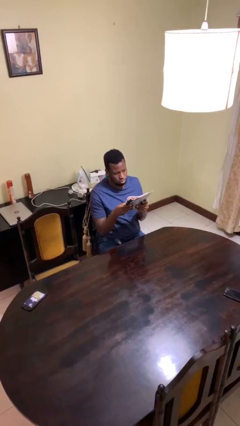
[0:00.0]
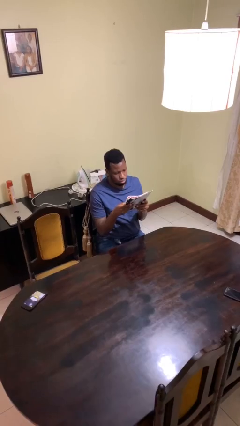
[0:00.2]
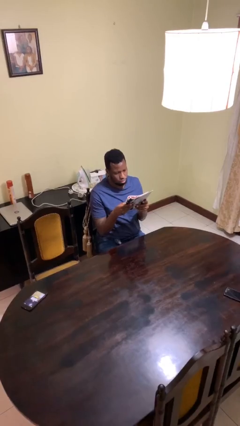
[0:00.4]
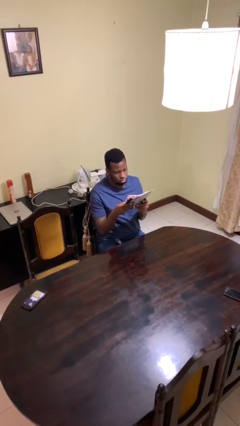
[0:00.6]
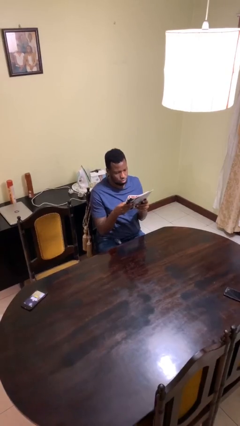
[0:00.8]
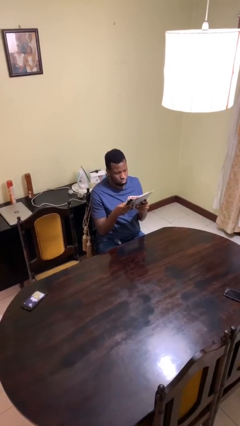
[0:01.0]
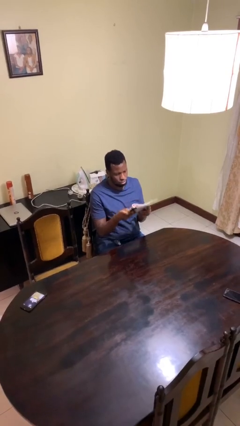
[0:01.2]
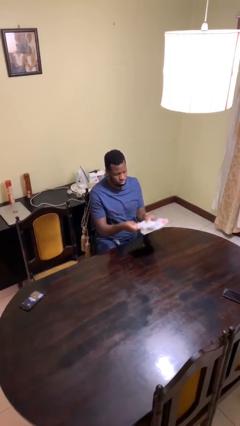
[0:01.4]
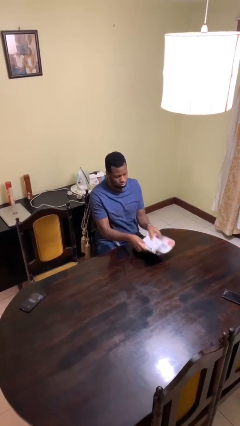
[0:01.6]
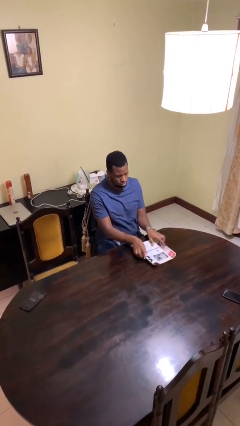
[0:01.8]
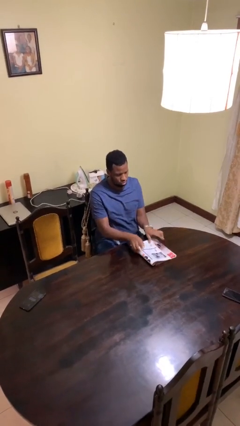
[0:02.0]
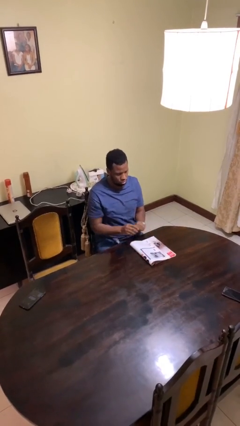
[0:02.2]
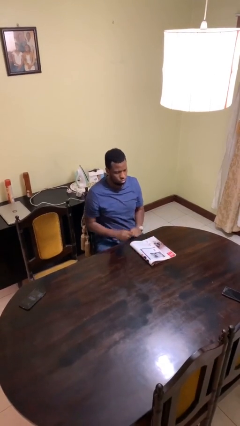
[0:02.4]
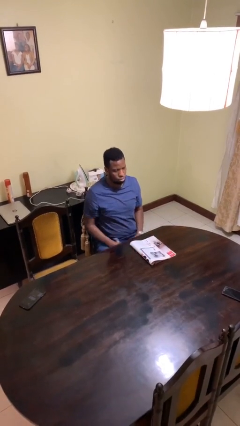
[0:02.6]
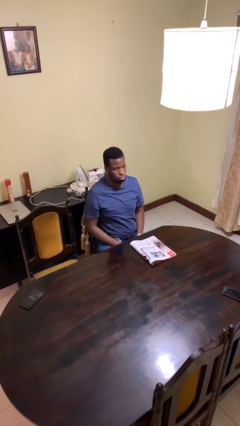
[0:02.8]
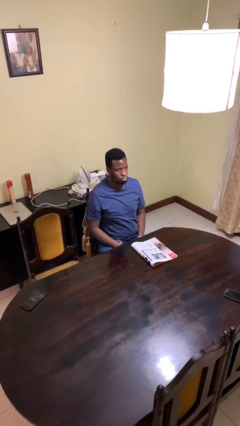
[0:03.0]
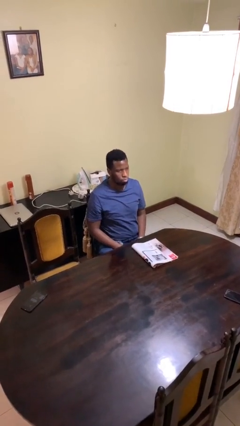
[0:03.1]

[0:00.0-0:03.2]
person puts down object on table

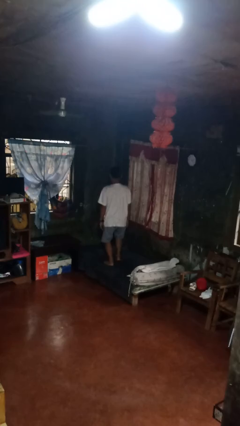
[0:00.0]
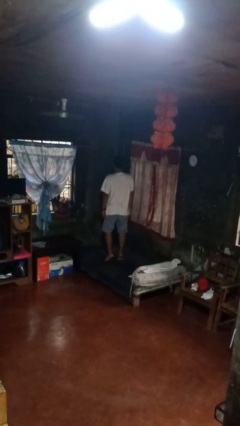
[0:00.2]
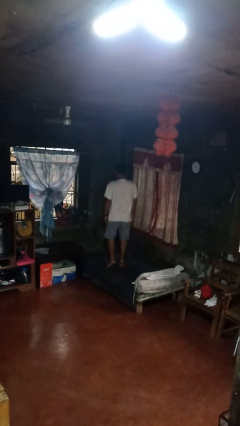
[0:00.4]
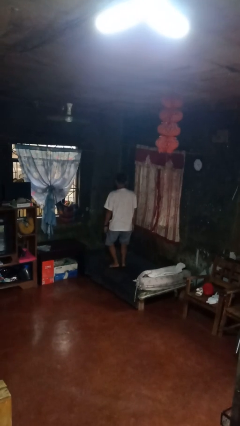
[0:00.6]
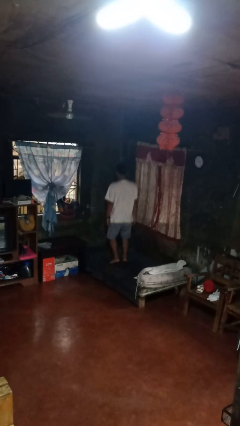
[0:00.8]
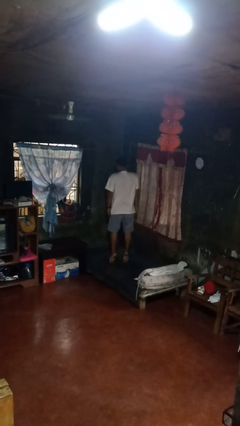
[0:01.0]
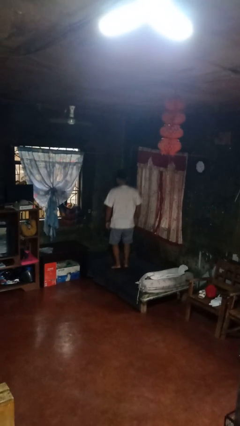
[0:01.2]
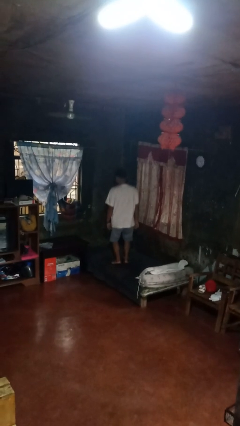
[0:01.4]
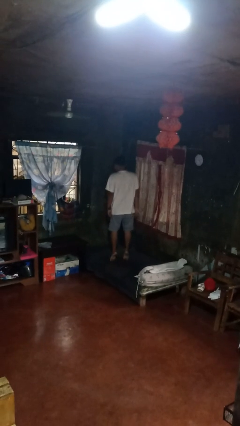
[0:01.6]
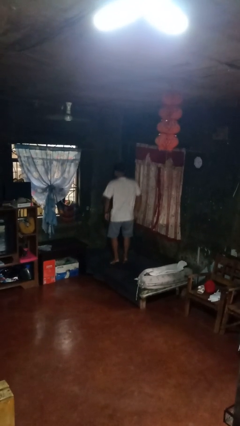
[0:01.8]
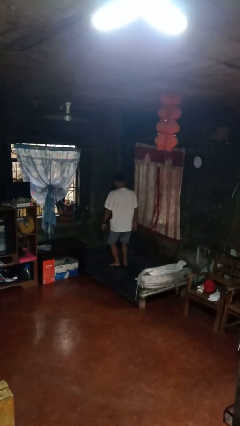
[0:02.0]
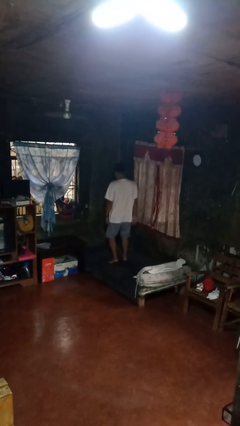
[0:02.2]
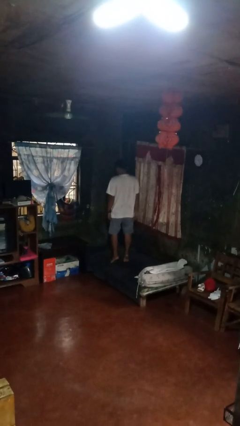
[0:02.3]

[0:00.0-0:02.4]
person jumps on bed

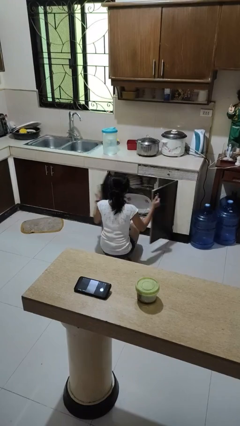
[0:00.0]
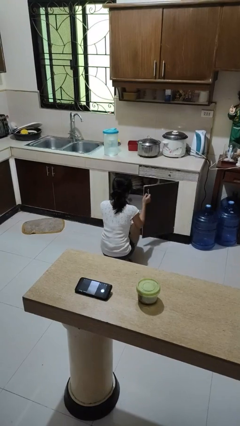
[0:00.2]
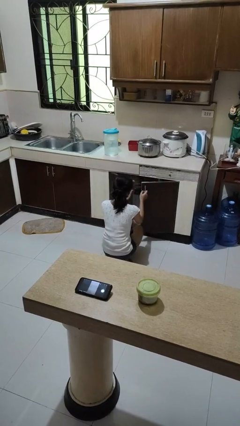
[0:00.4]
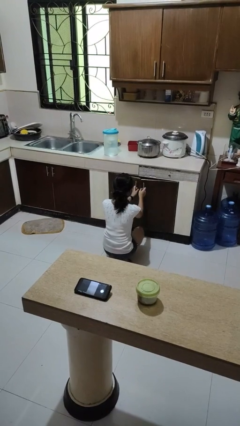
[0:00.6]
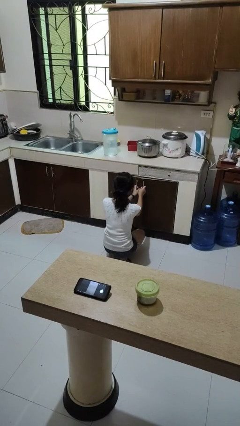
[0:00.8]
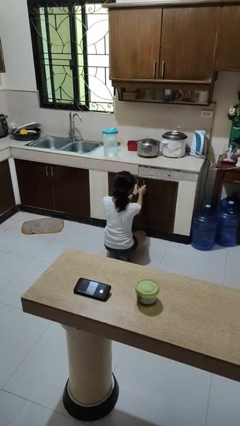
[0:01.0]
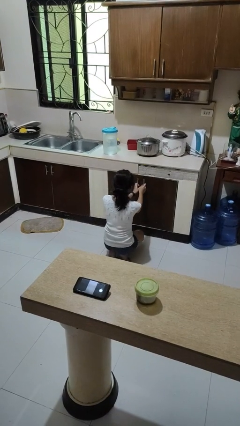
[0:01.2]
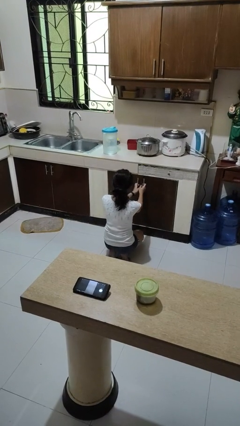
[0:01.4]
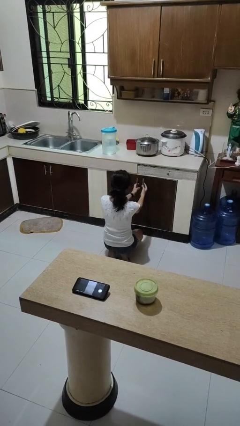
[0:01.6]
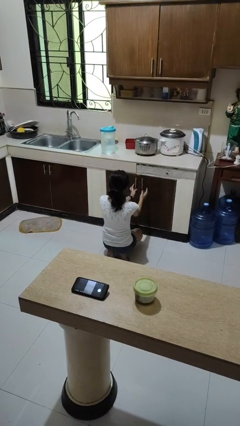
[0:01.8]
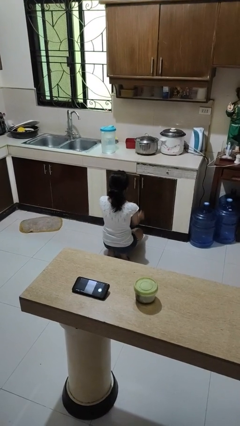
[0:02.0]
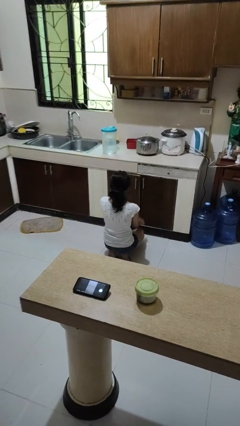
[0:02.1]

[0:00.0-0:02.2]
person closes dishwasher

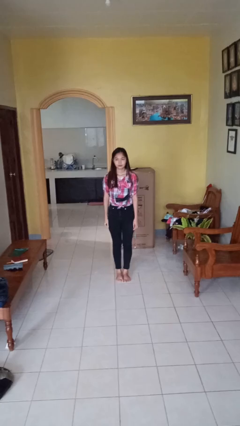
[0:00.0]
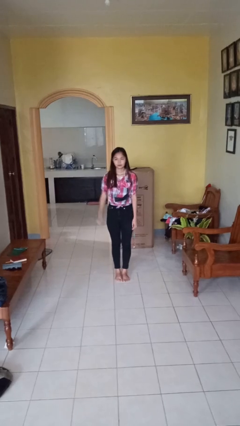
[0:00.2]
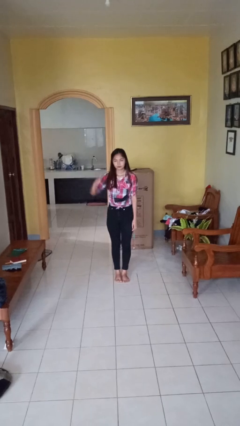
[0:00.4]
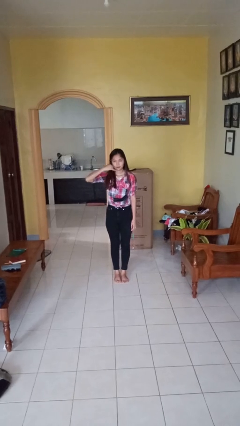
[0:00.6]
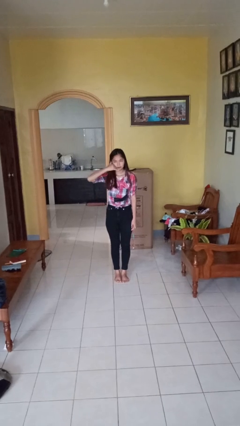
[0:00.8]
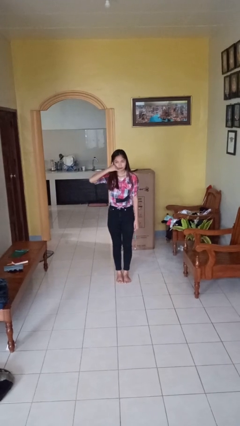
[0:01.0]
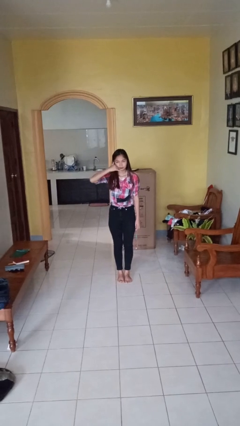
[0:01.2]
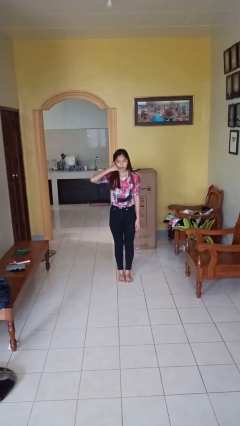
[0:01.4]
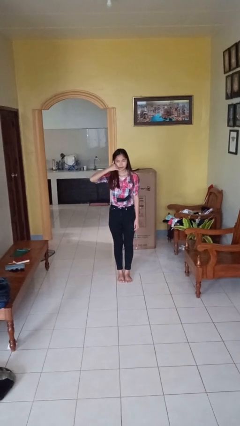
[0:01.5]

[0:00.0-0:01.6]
person gestures call me

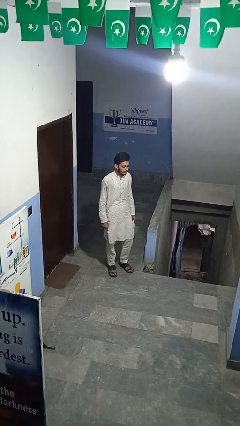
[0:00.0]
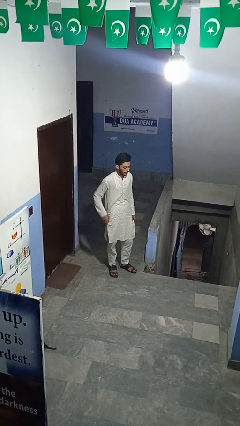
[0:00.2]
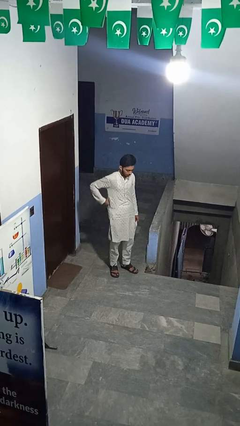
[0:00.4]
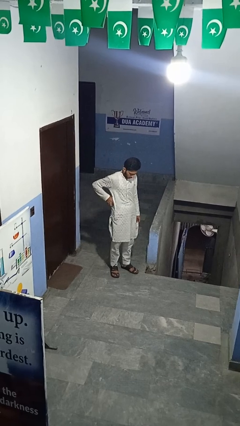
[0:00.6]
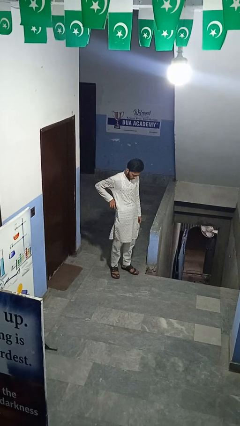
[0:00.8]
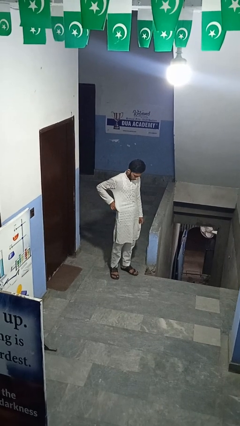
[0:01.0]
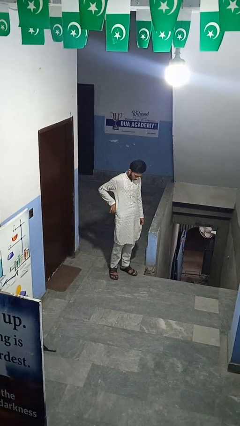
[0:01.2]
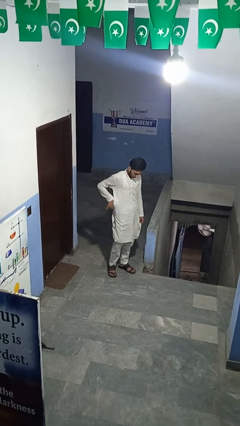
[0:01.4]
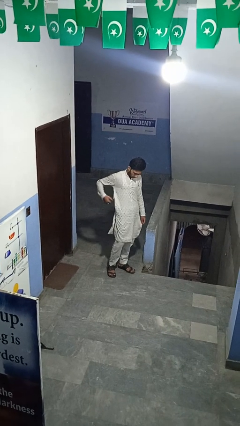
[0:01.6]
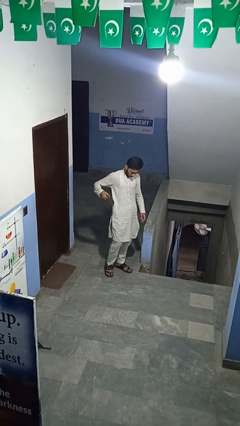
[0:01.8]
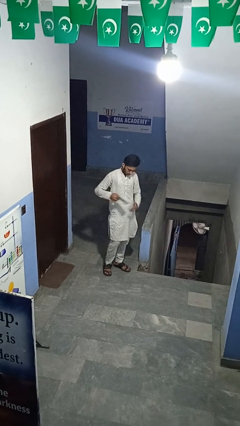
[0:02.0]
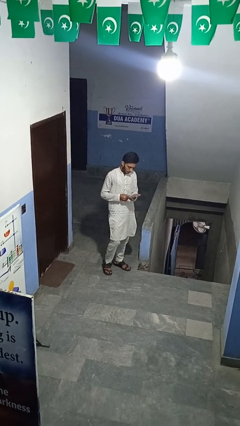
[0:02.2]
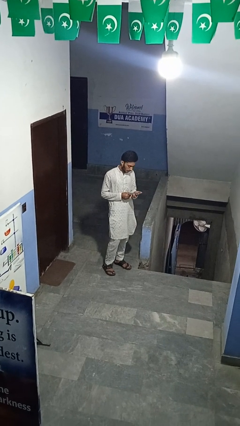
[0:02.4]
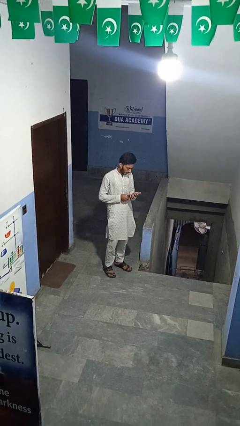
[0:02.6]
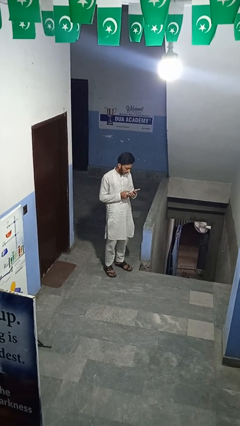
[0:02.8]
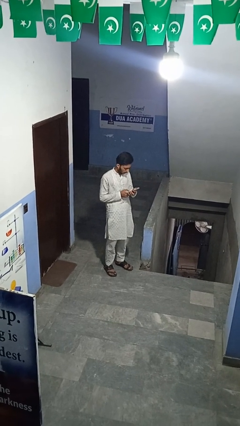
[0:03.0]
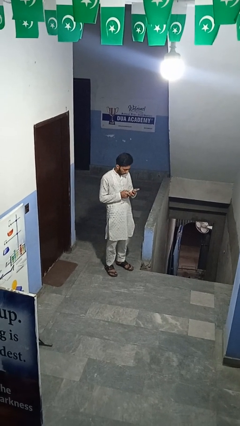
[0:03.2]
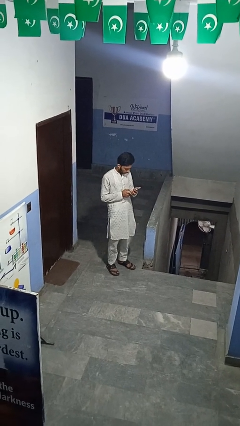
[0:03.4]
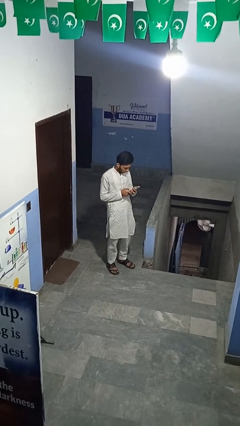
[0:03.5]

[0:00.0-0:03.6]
person puts hands in back pockets

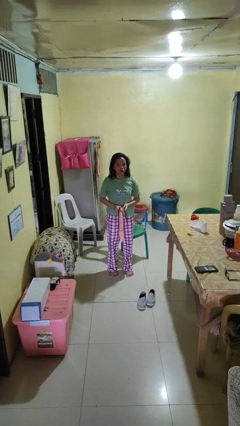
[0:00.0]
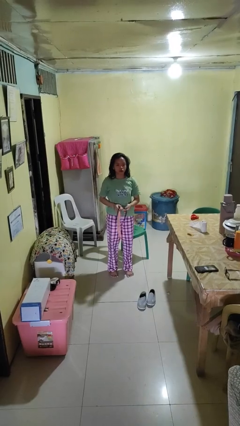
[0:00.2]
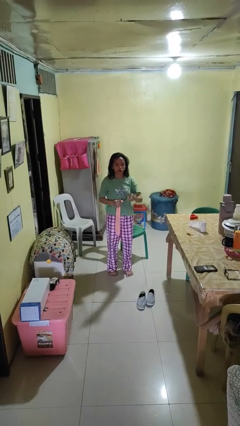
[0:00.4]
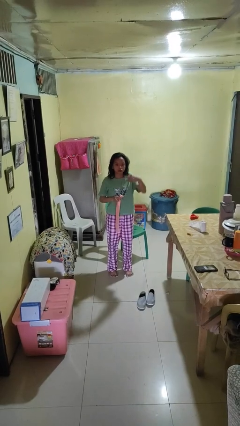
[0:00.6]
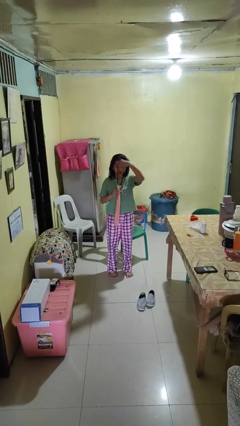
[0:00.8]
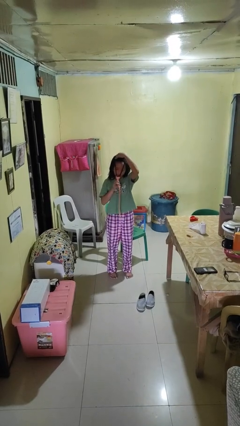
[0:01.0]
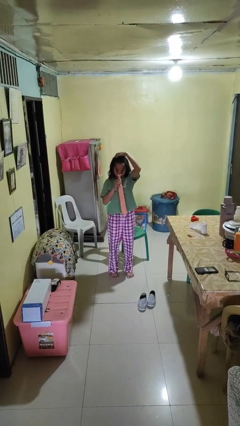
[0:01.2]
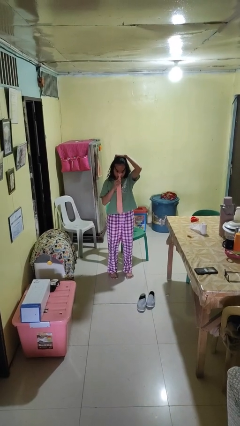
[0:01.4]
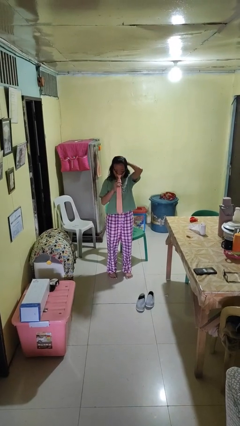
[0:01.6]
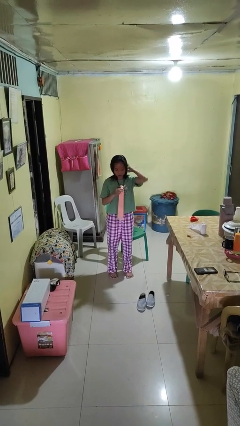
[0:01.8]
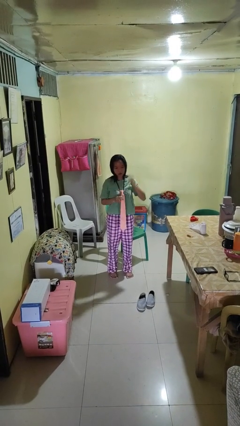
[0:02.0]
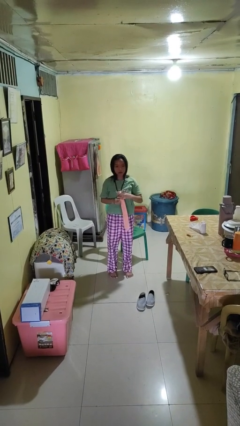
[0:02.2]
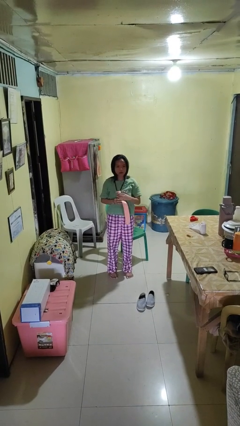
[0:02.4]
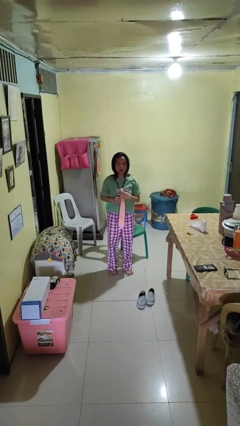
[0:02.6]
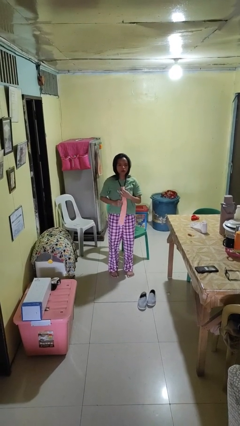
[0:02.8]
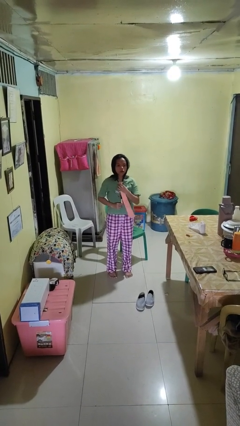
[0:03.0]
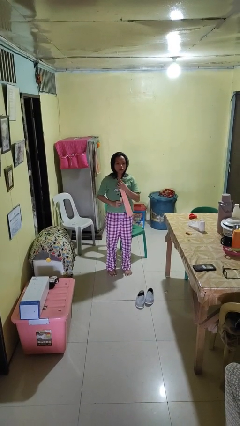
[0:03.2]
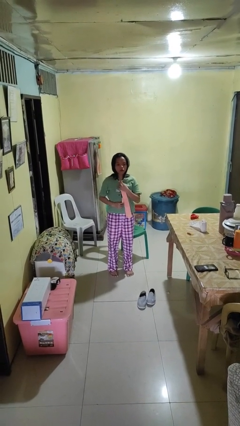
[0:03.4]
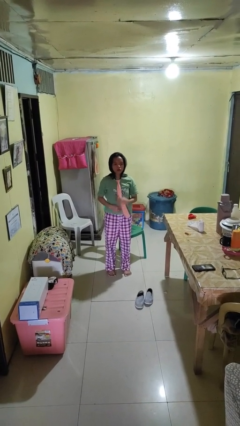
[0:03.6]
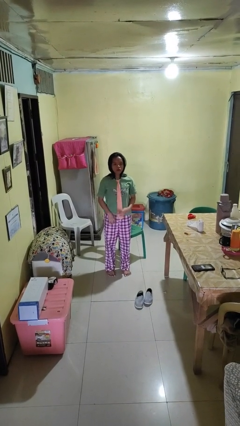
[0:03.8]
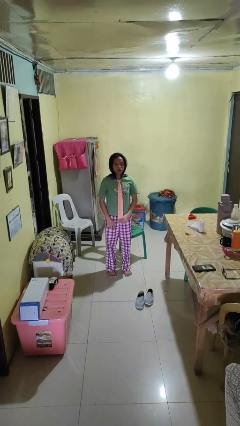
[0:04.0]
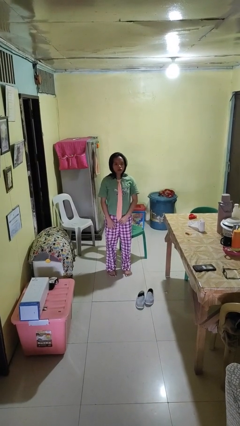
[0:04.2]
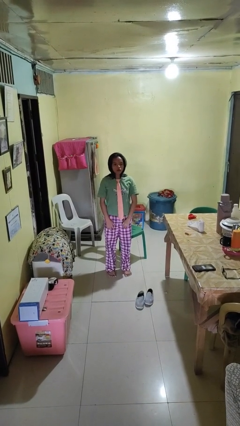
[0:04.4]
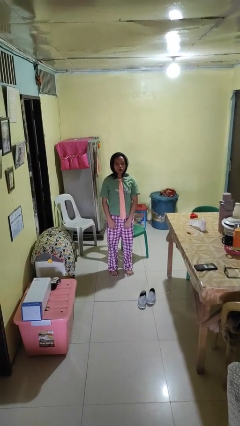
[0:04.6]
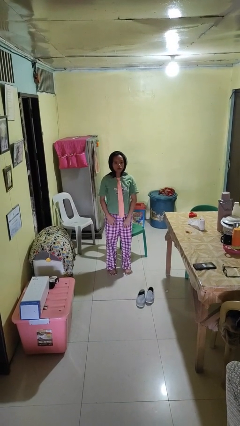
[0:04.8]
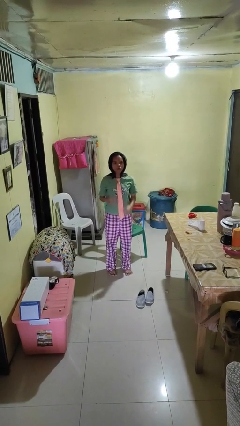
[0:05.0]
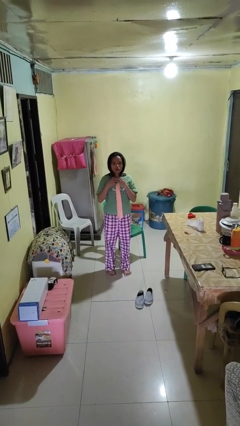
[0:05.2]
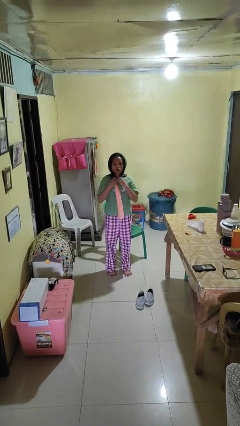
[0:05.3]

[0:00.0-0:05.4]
person puts on necktie
